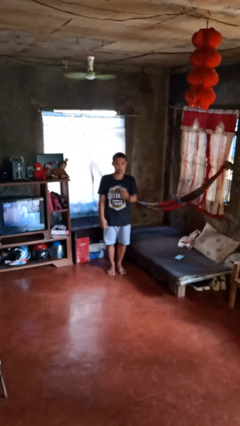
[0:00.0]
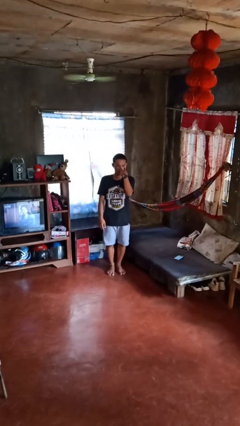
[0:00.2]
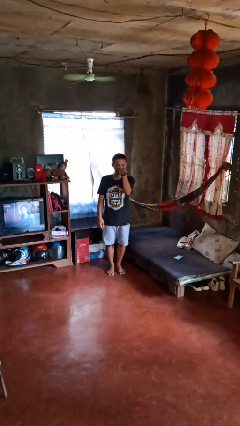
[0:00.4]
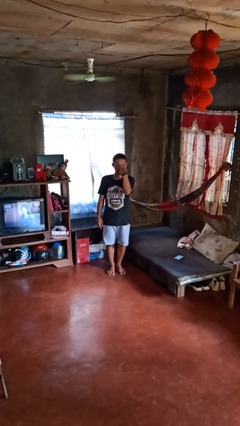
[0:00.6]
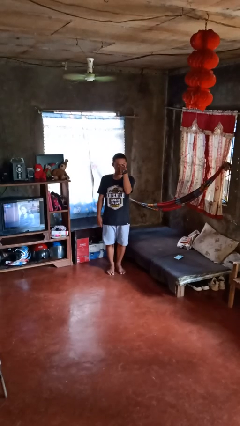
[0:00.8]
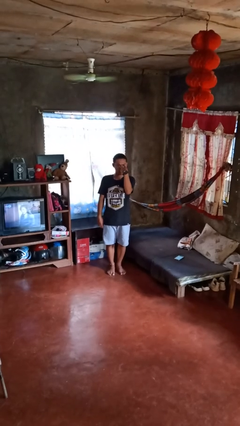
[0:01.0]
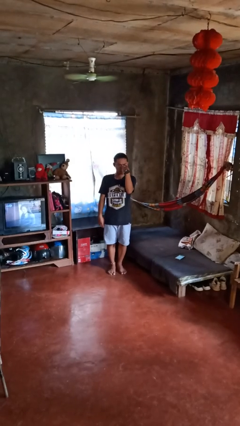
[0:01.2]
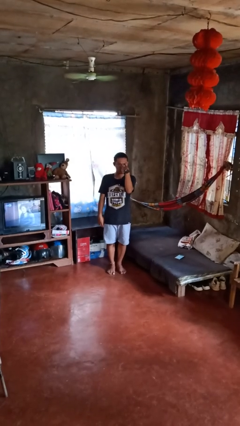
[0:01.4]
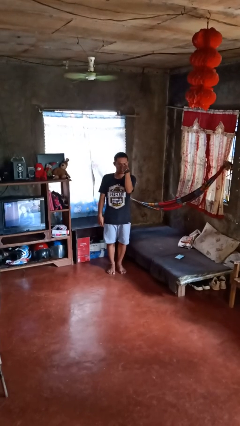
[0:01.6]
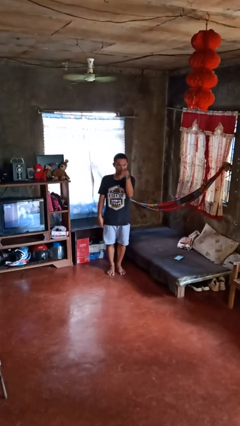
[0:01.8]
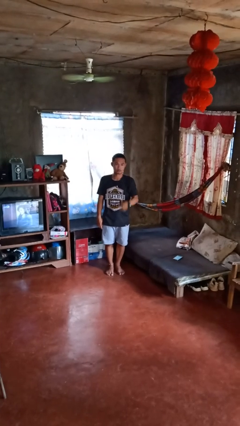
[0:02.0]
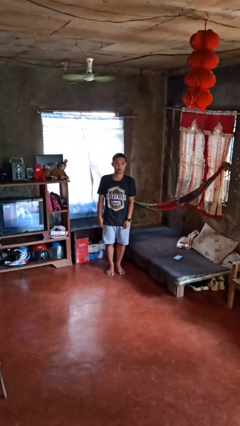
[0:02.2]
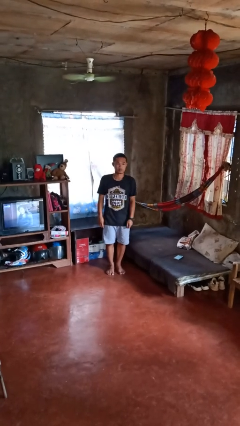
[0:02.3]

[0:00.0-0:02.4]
person gestures watch closely

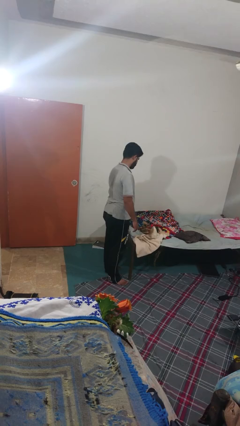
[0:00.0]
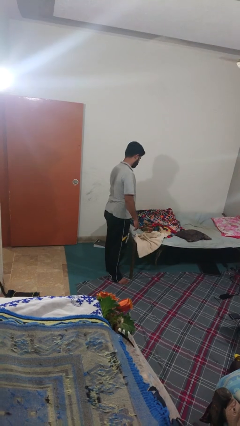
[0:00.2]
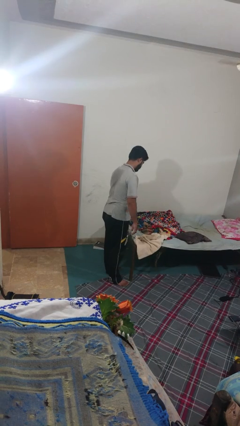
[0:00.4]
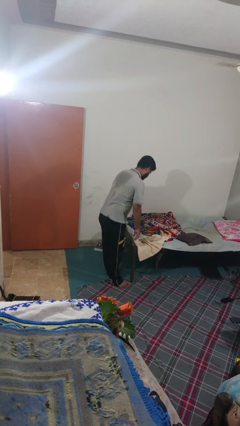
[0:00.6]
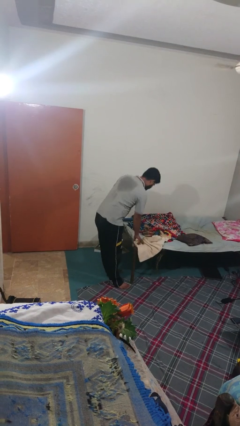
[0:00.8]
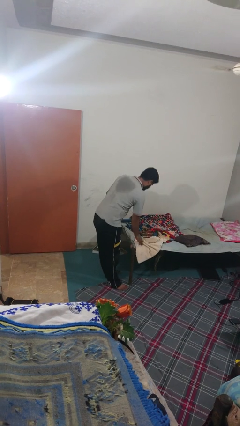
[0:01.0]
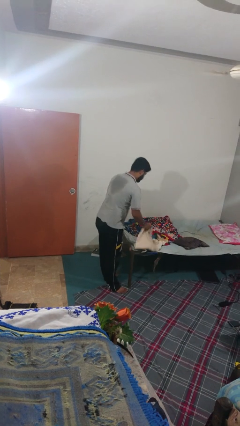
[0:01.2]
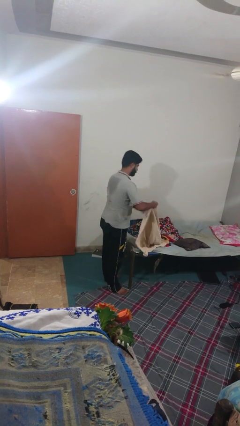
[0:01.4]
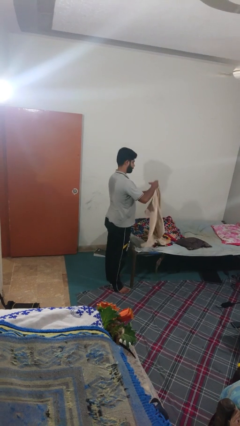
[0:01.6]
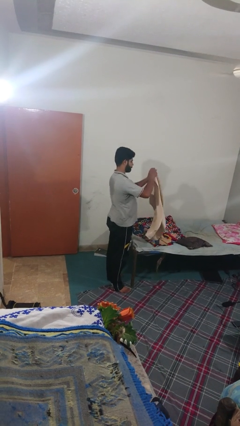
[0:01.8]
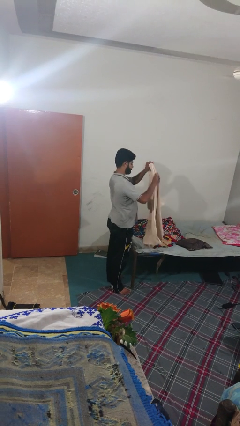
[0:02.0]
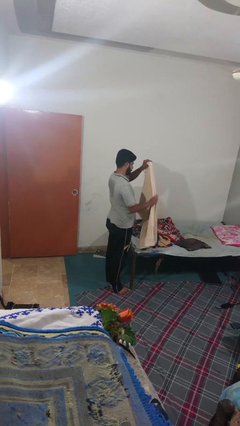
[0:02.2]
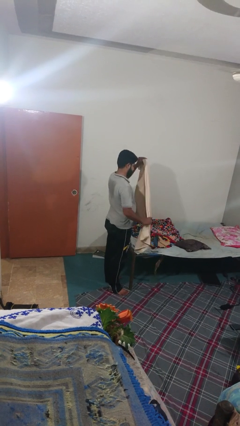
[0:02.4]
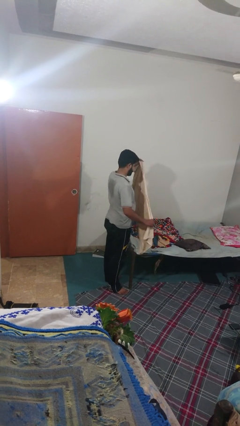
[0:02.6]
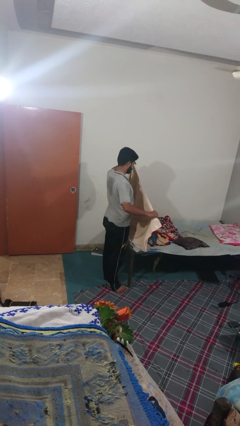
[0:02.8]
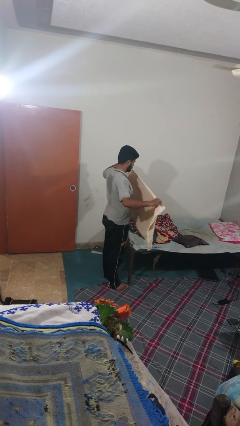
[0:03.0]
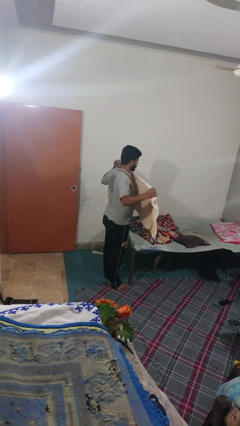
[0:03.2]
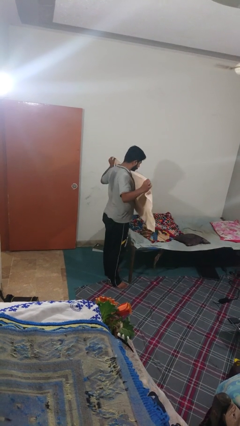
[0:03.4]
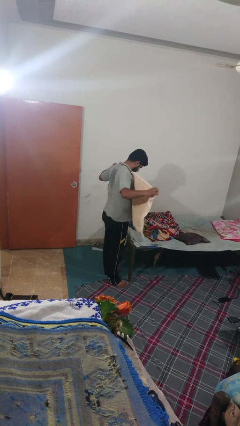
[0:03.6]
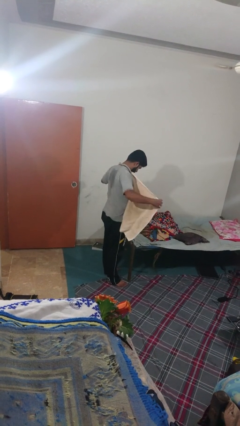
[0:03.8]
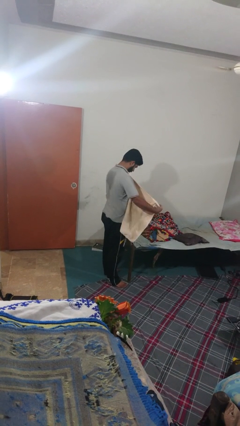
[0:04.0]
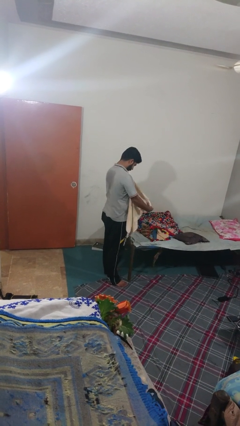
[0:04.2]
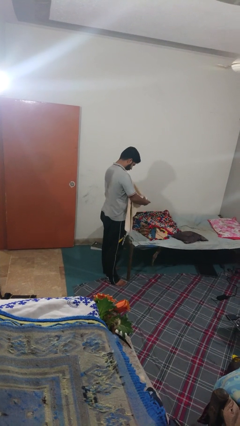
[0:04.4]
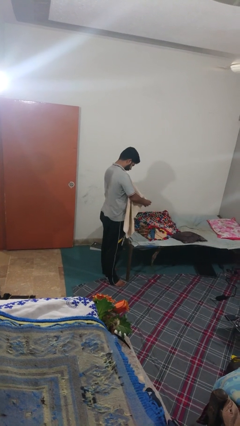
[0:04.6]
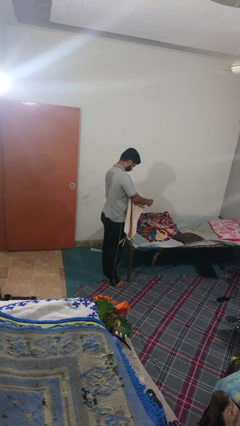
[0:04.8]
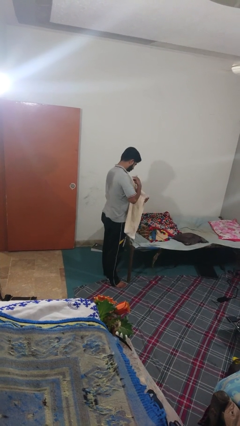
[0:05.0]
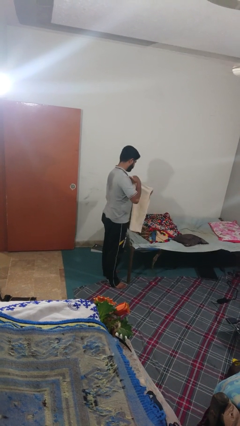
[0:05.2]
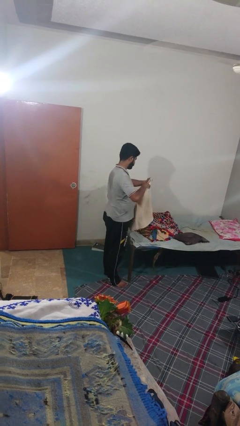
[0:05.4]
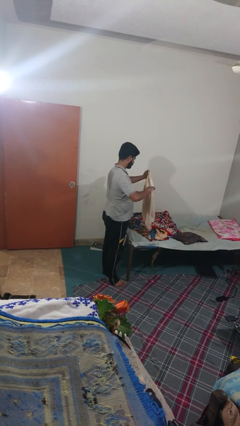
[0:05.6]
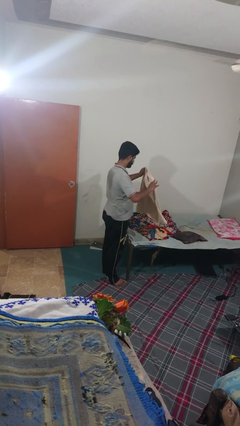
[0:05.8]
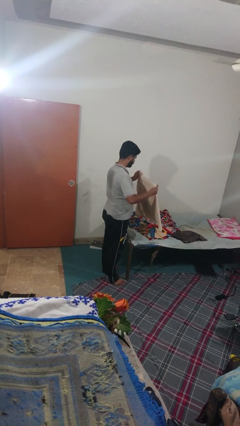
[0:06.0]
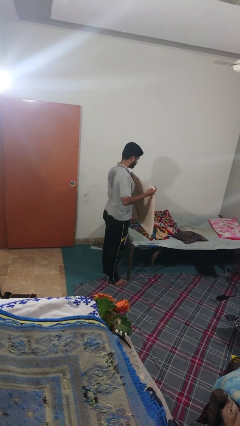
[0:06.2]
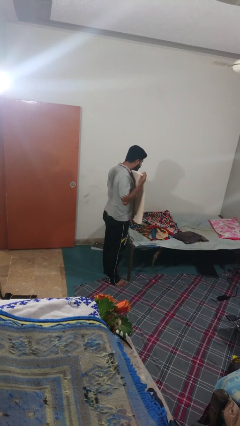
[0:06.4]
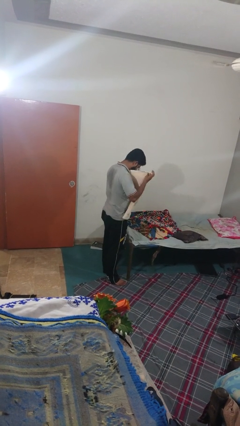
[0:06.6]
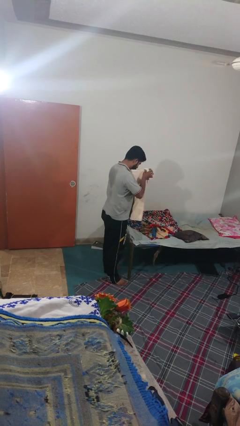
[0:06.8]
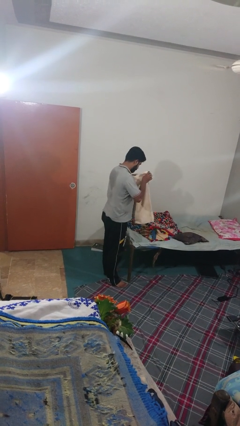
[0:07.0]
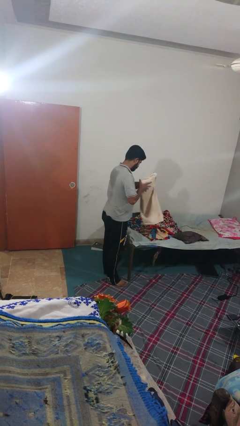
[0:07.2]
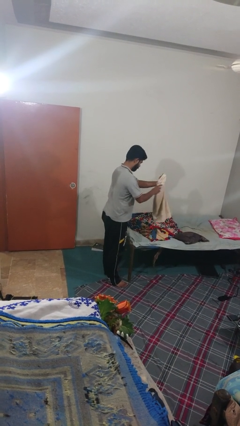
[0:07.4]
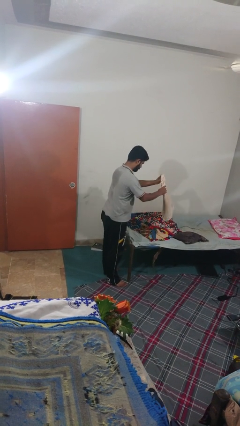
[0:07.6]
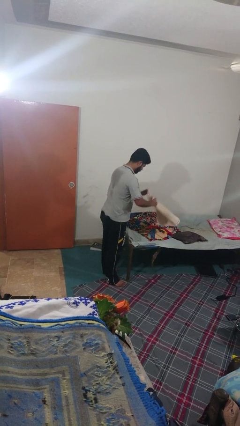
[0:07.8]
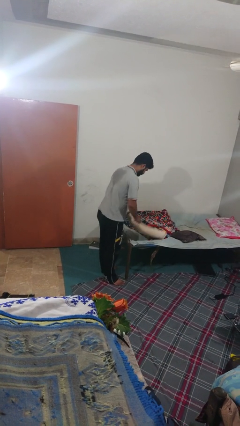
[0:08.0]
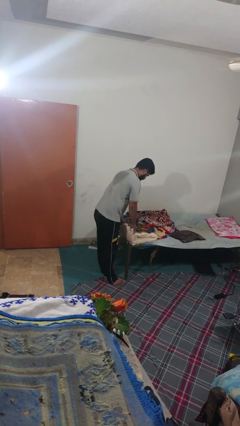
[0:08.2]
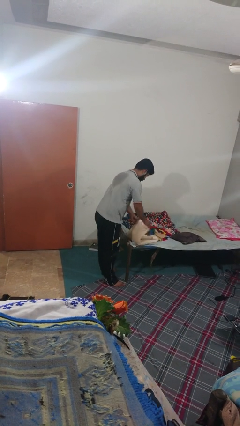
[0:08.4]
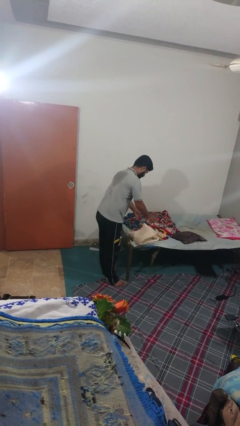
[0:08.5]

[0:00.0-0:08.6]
person folds towel

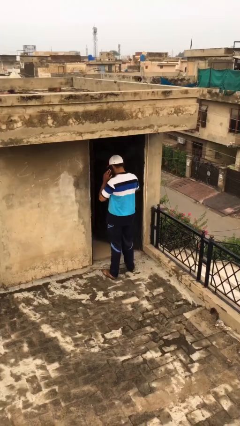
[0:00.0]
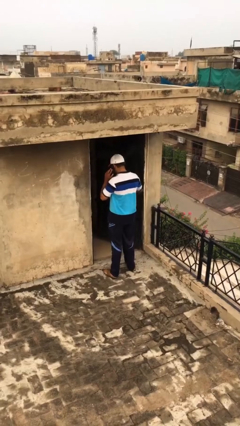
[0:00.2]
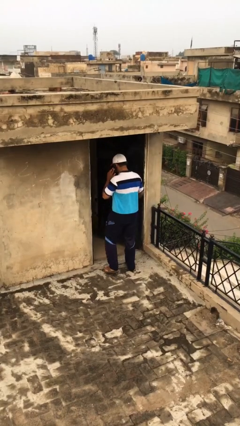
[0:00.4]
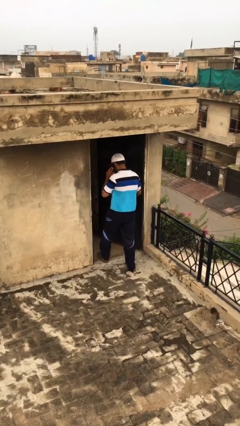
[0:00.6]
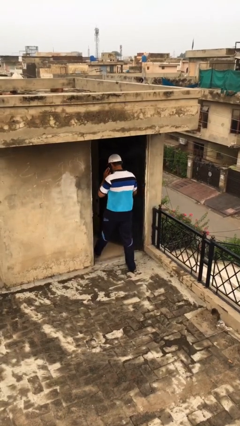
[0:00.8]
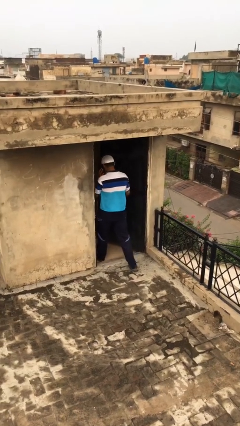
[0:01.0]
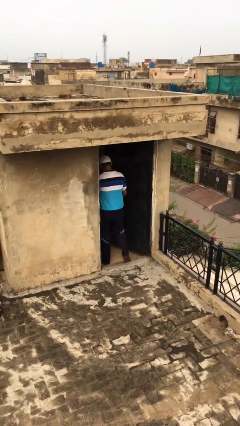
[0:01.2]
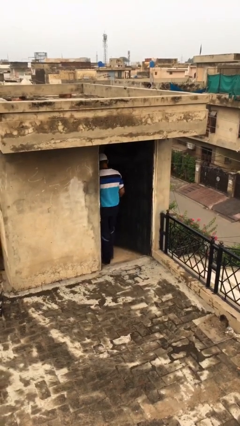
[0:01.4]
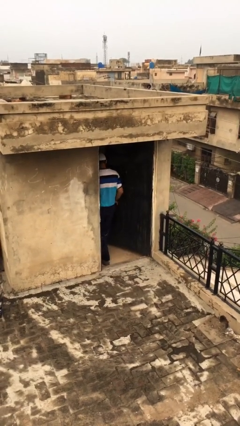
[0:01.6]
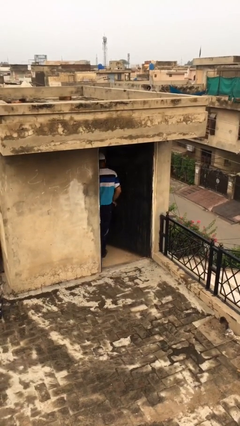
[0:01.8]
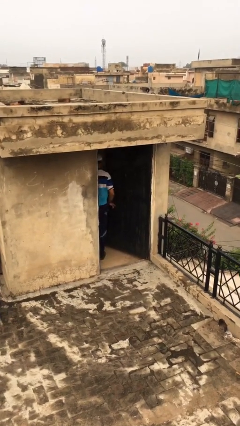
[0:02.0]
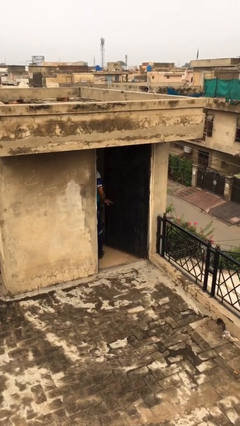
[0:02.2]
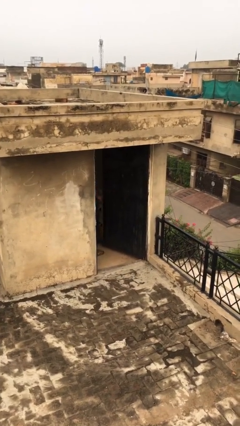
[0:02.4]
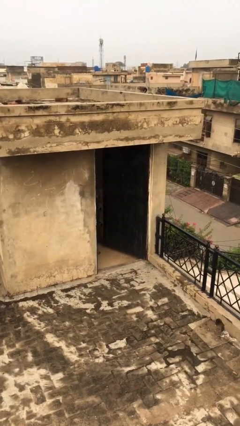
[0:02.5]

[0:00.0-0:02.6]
person exits scene through structure

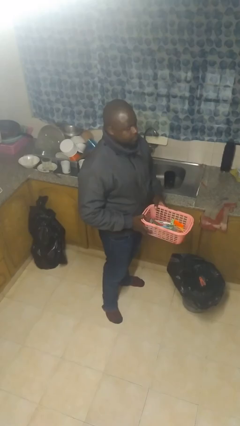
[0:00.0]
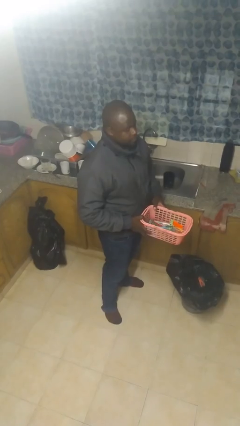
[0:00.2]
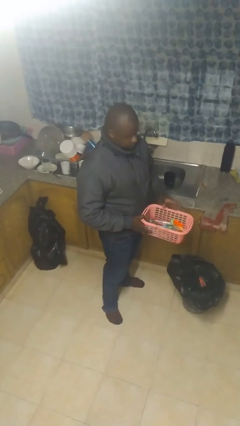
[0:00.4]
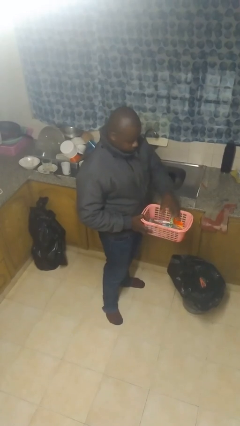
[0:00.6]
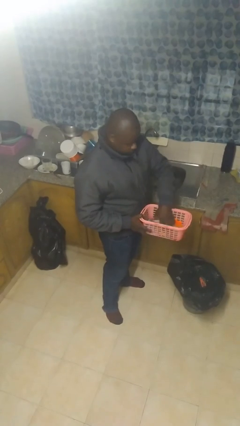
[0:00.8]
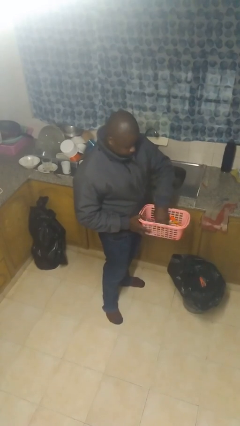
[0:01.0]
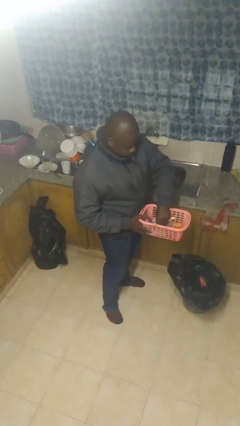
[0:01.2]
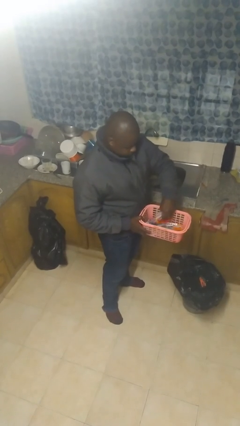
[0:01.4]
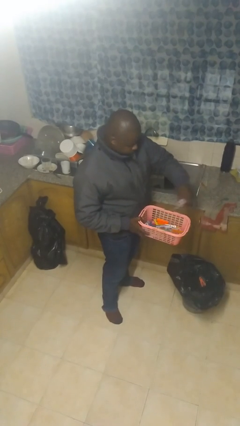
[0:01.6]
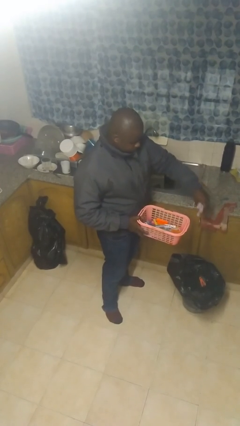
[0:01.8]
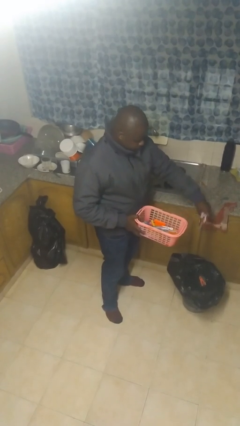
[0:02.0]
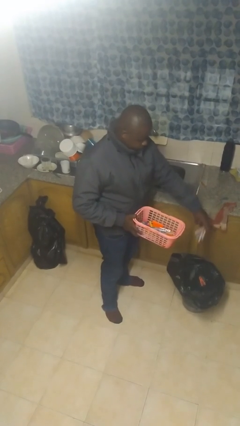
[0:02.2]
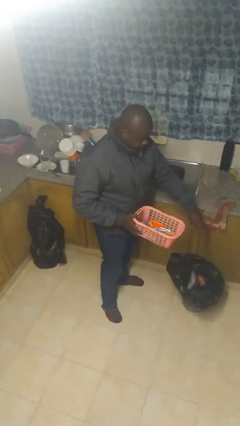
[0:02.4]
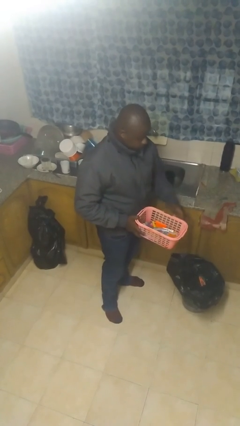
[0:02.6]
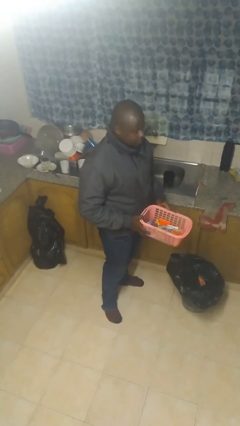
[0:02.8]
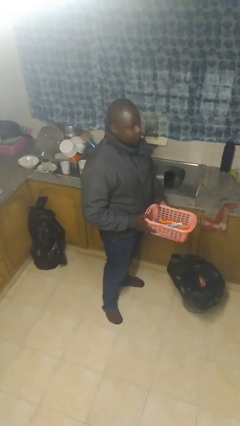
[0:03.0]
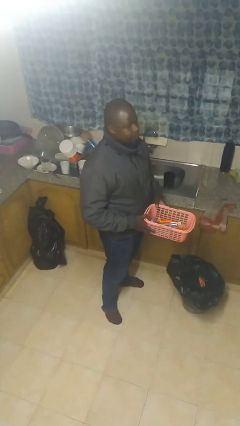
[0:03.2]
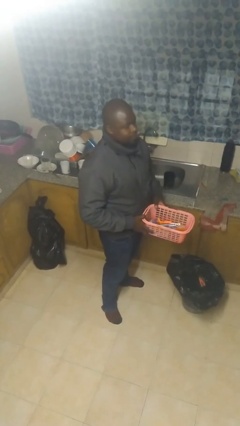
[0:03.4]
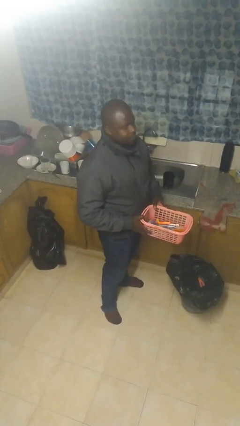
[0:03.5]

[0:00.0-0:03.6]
person discards trash

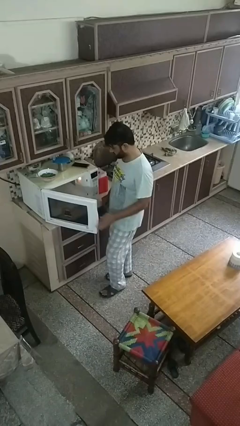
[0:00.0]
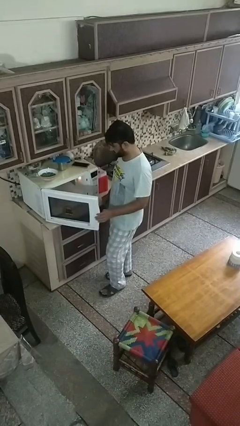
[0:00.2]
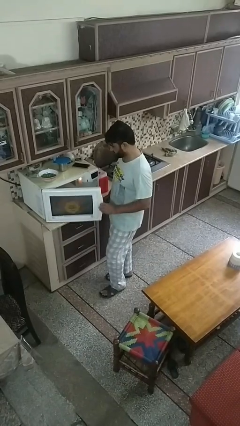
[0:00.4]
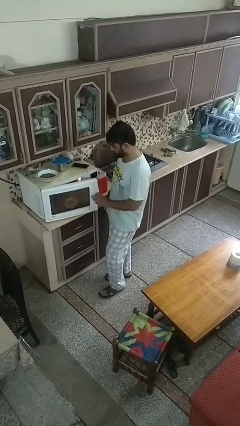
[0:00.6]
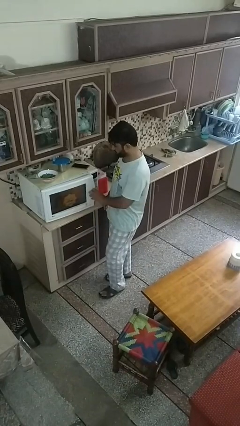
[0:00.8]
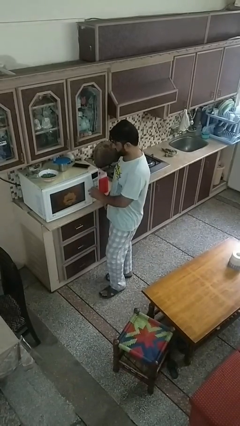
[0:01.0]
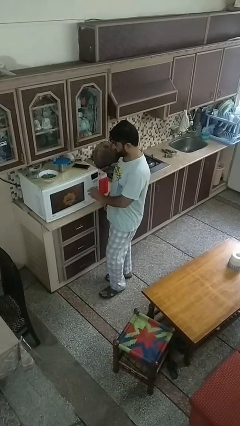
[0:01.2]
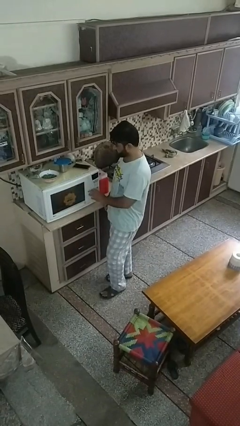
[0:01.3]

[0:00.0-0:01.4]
person closes oven door
